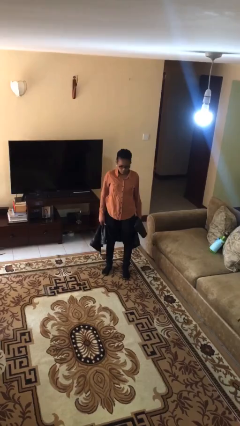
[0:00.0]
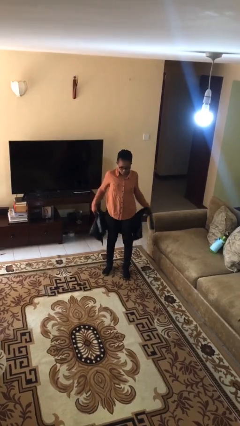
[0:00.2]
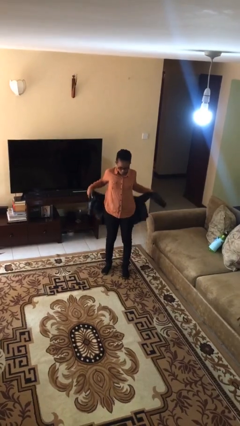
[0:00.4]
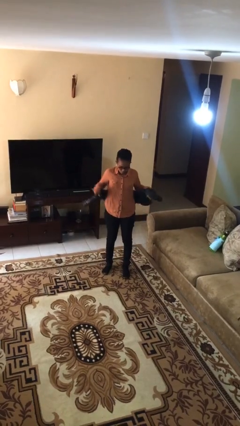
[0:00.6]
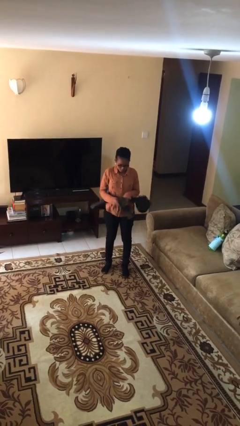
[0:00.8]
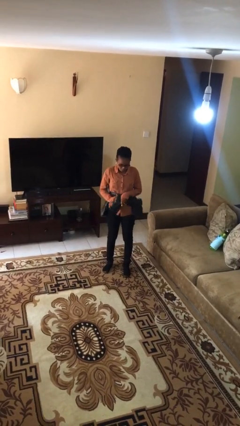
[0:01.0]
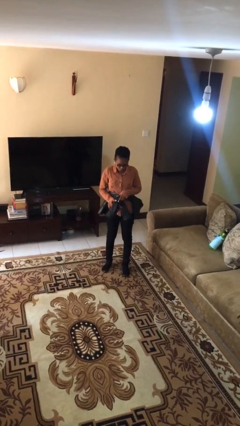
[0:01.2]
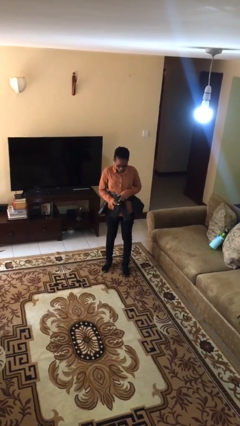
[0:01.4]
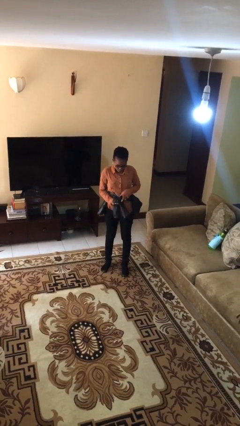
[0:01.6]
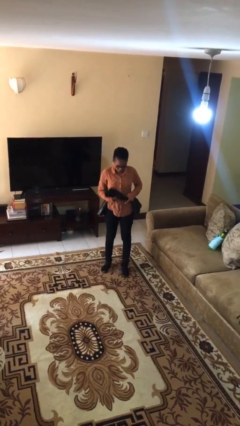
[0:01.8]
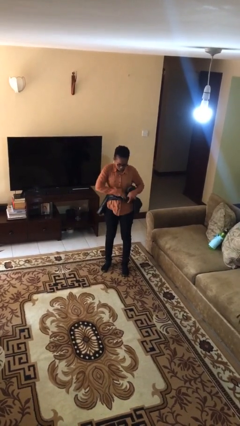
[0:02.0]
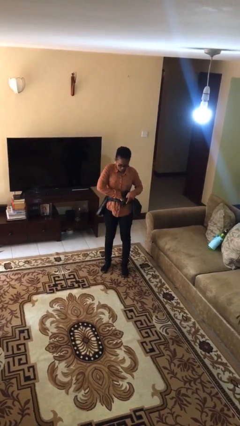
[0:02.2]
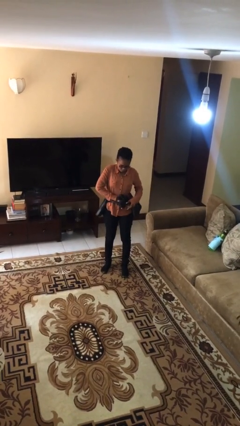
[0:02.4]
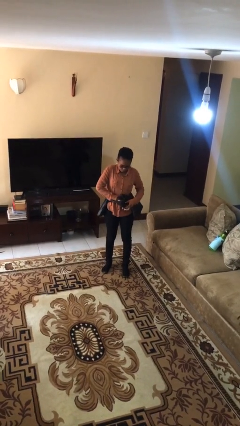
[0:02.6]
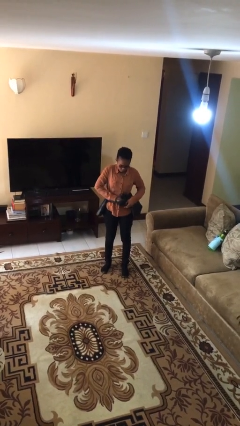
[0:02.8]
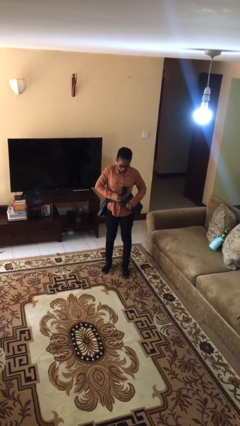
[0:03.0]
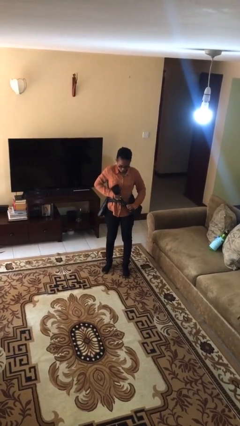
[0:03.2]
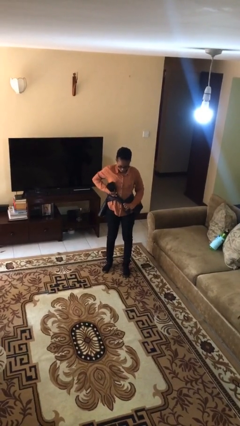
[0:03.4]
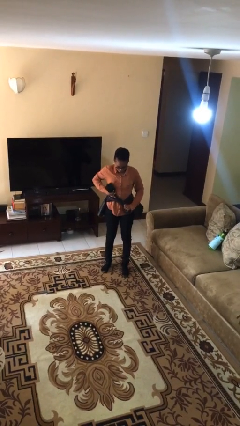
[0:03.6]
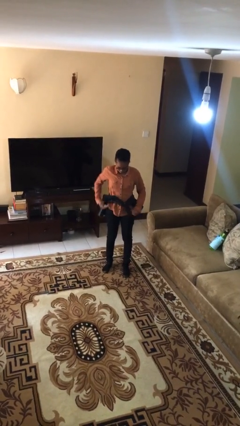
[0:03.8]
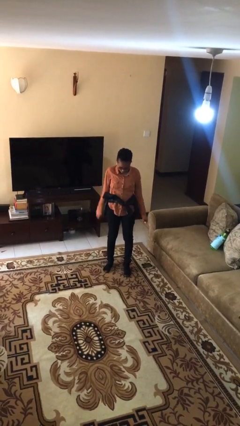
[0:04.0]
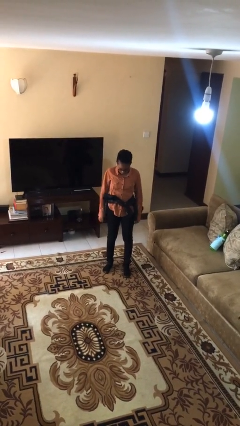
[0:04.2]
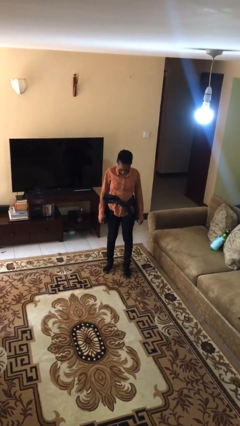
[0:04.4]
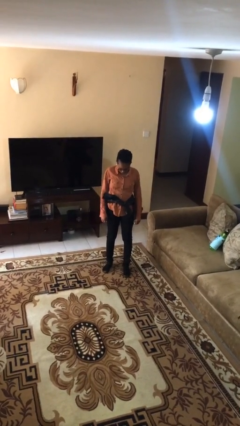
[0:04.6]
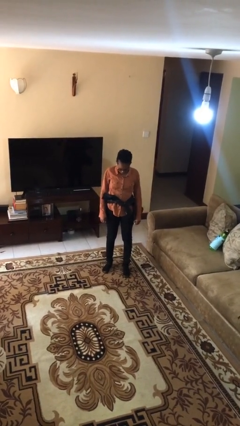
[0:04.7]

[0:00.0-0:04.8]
person ties jacket around waist

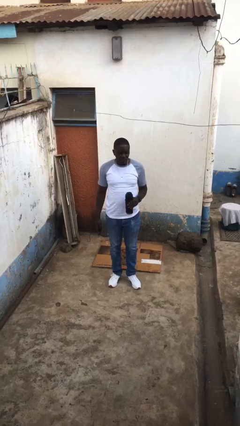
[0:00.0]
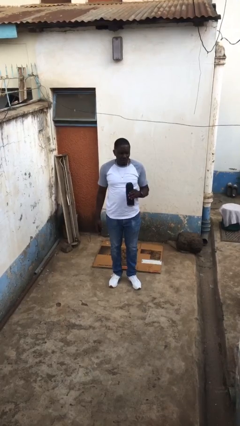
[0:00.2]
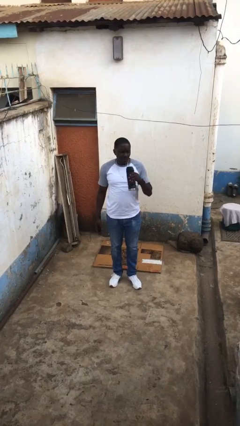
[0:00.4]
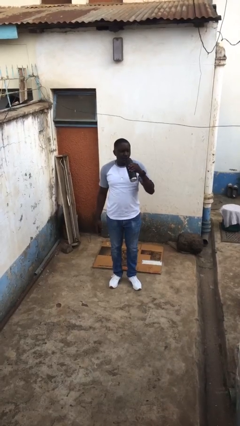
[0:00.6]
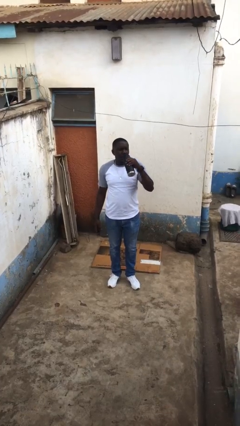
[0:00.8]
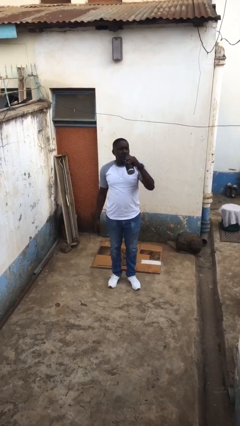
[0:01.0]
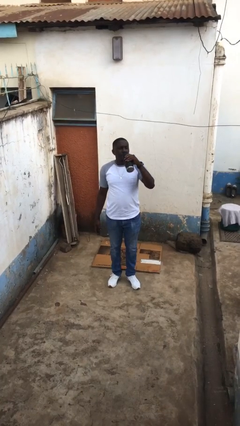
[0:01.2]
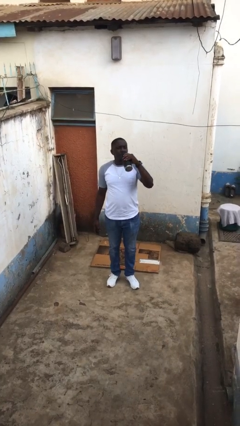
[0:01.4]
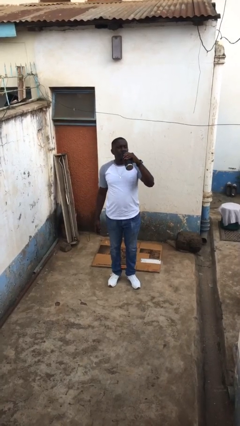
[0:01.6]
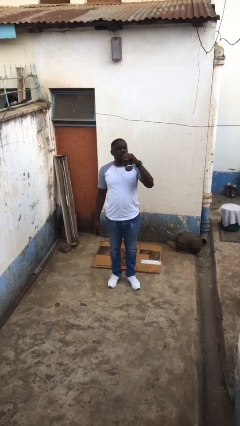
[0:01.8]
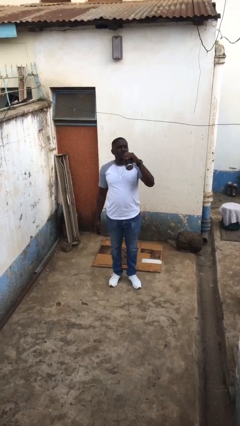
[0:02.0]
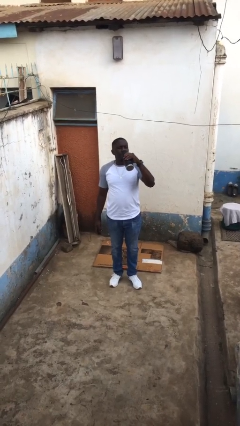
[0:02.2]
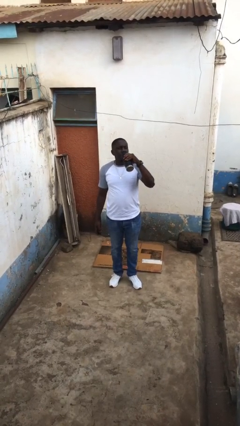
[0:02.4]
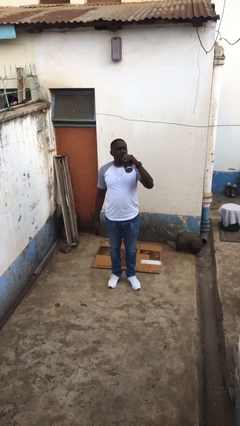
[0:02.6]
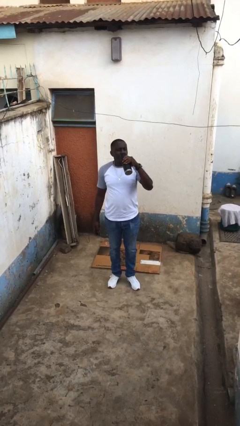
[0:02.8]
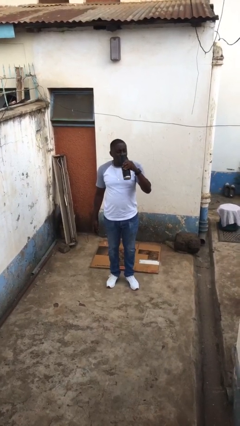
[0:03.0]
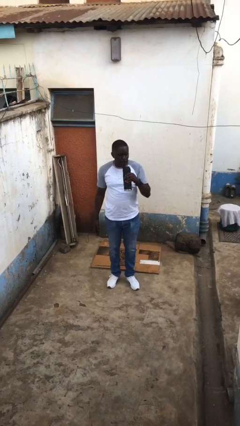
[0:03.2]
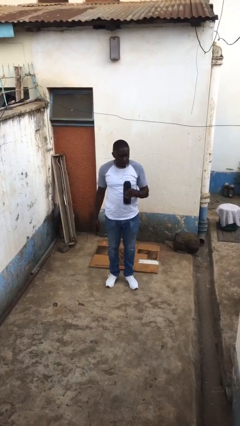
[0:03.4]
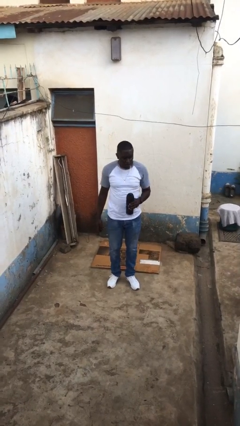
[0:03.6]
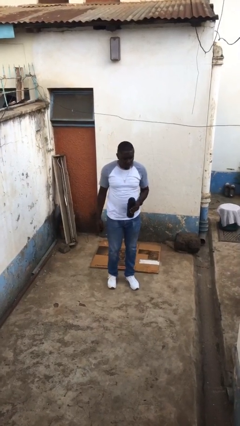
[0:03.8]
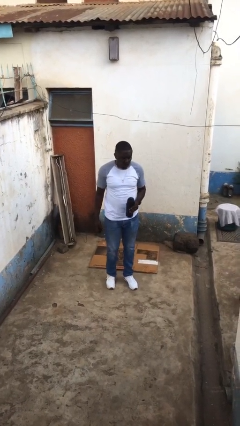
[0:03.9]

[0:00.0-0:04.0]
person drinks from bottle

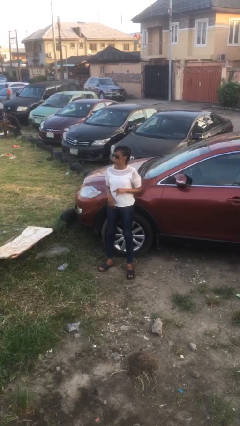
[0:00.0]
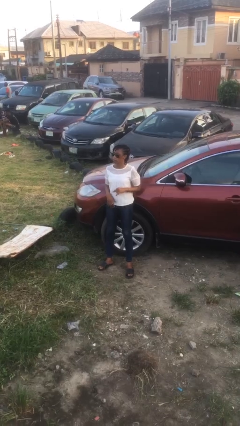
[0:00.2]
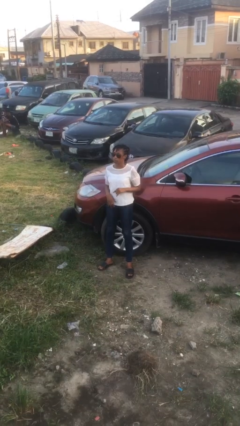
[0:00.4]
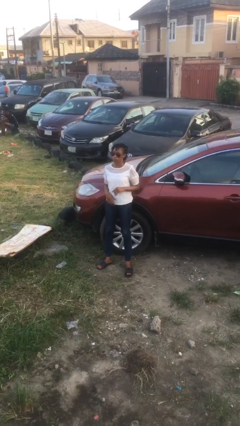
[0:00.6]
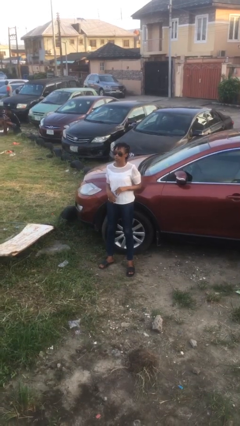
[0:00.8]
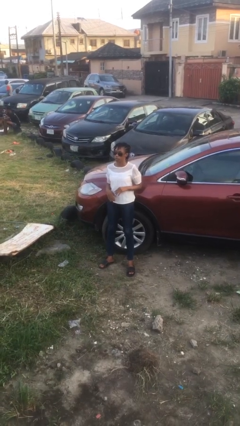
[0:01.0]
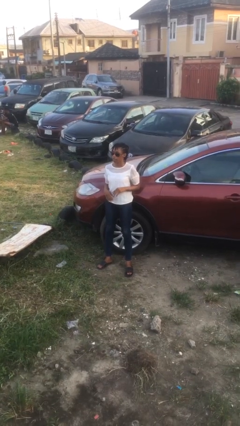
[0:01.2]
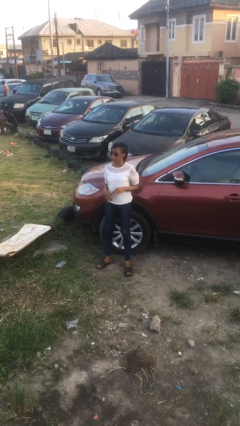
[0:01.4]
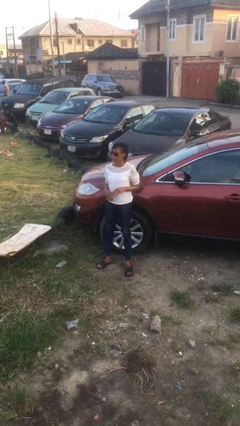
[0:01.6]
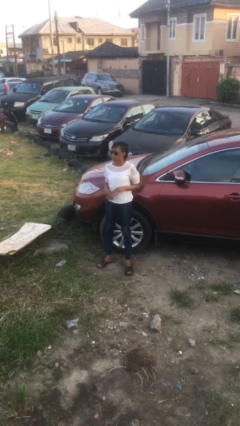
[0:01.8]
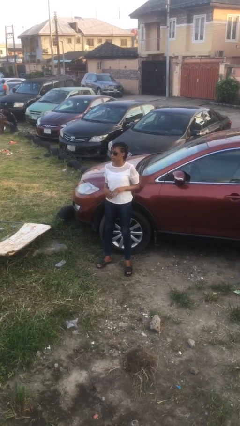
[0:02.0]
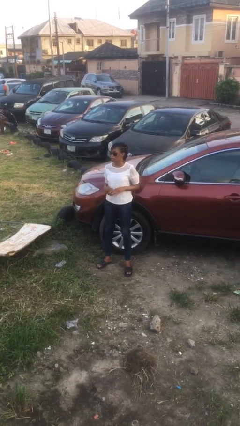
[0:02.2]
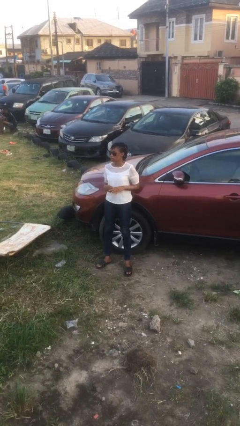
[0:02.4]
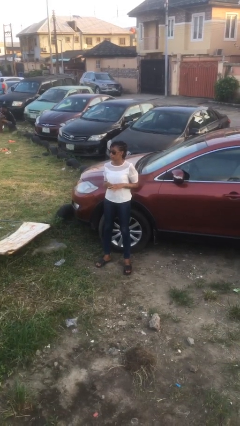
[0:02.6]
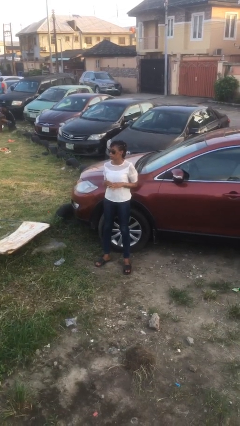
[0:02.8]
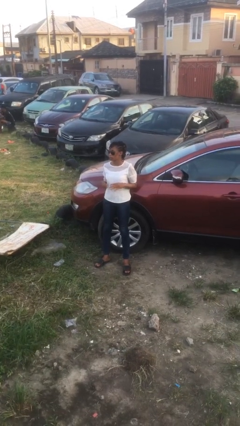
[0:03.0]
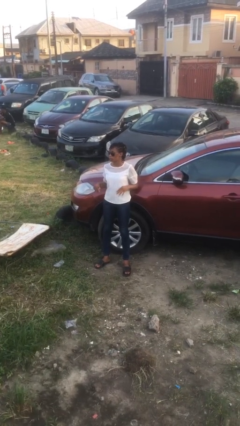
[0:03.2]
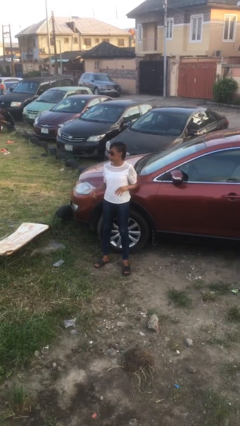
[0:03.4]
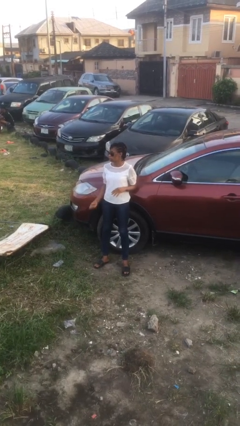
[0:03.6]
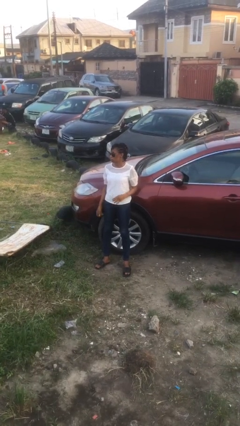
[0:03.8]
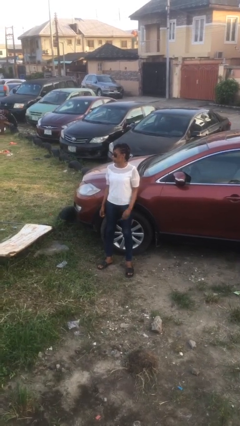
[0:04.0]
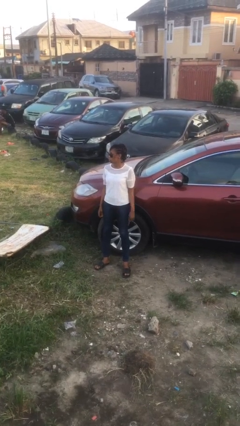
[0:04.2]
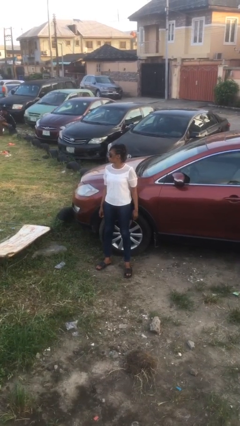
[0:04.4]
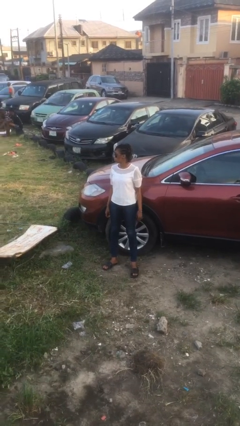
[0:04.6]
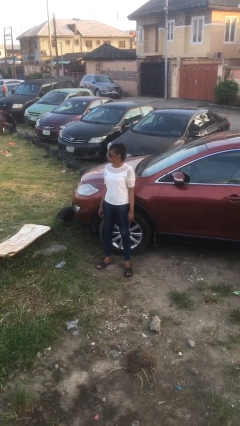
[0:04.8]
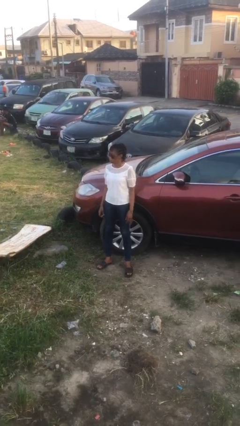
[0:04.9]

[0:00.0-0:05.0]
person takes off ring

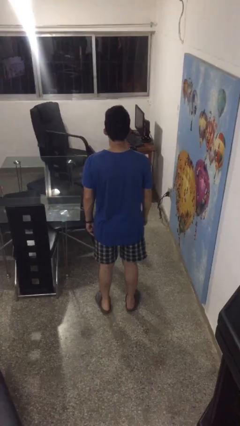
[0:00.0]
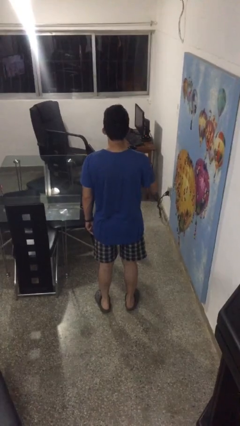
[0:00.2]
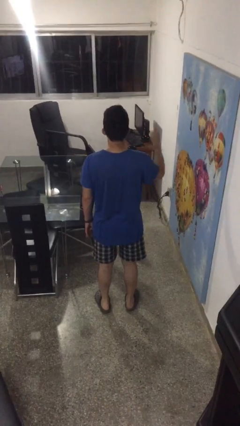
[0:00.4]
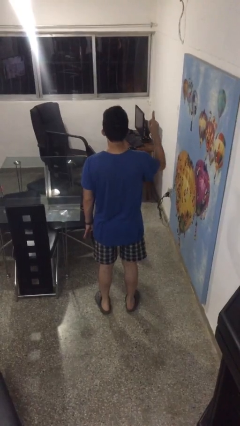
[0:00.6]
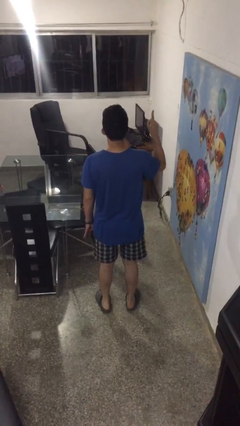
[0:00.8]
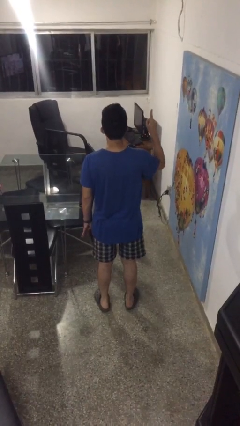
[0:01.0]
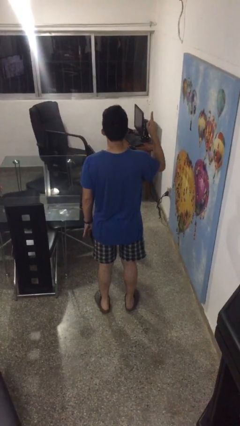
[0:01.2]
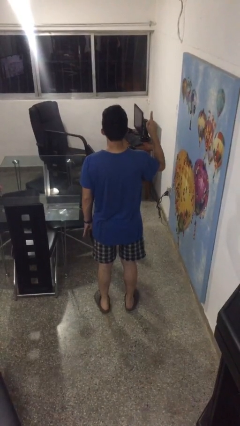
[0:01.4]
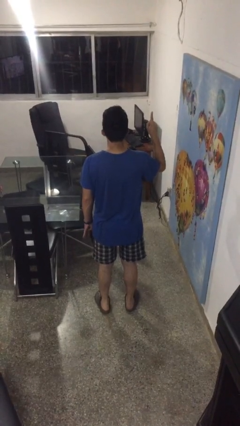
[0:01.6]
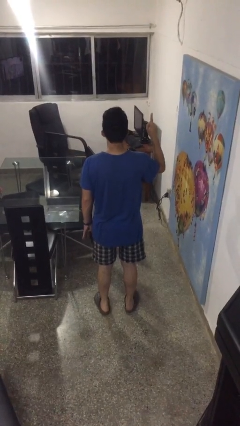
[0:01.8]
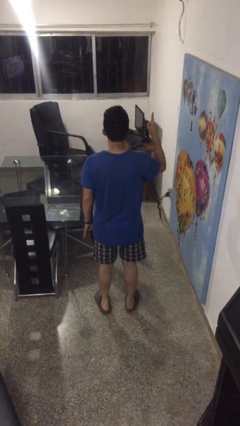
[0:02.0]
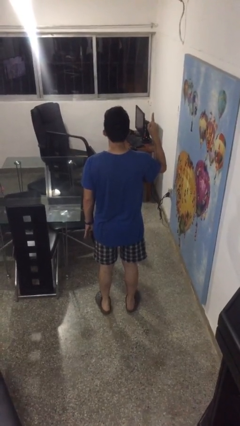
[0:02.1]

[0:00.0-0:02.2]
person gestures number one

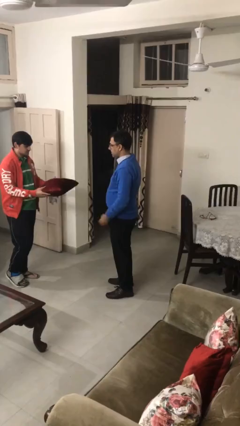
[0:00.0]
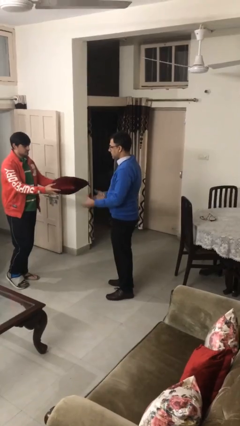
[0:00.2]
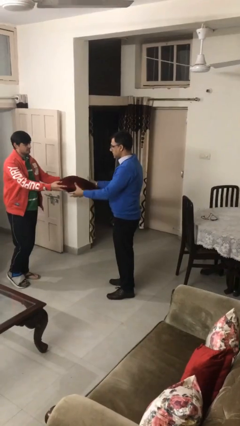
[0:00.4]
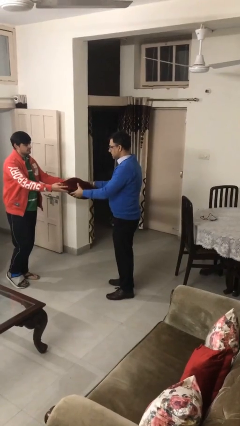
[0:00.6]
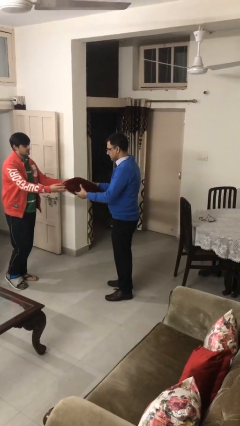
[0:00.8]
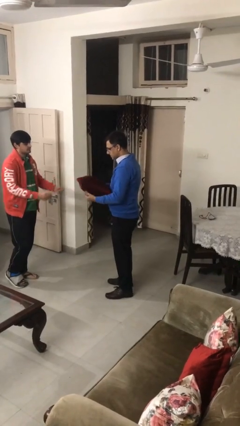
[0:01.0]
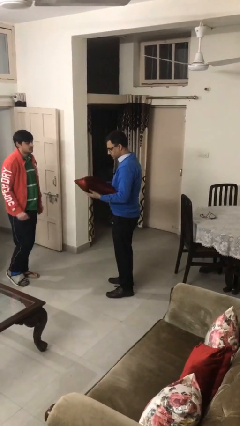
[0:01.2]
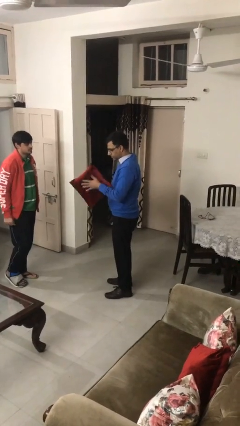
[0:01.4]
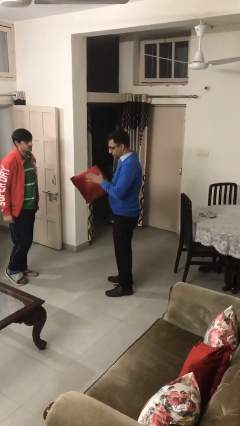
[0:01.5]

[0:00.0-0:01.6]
person transfers object to person
